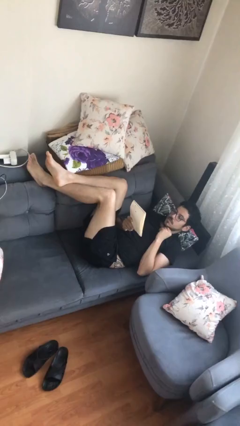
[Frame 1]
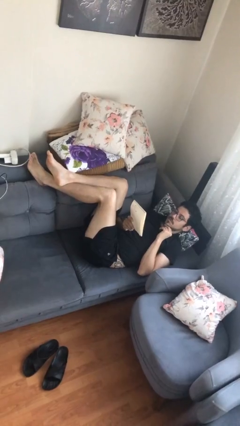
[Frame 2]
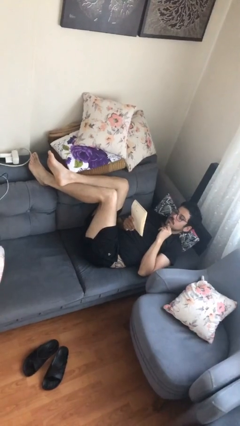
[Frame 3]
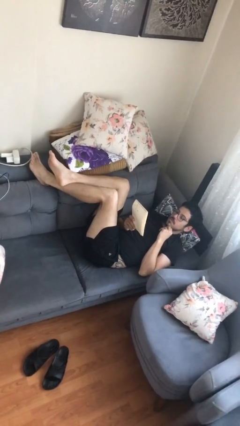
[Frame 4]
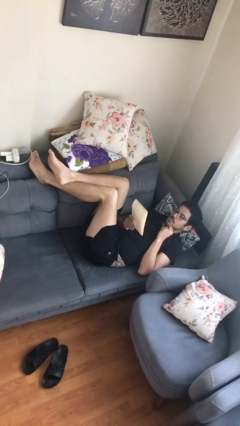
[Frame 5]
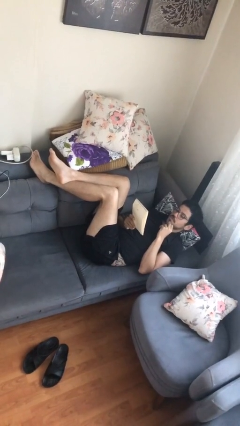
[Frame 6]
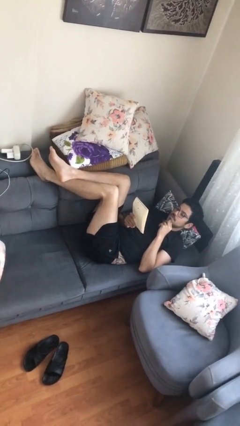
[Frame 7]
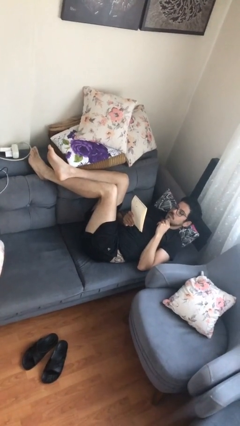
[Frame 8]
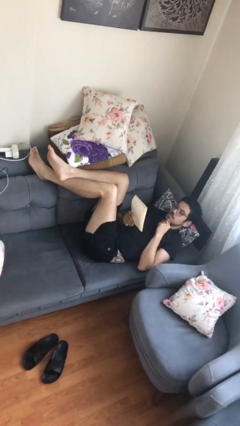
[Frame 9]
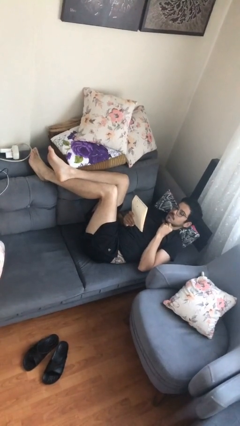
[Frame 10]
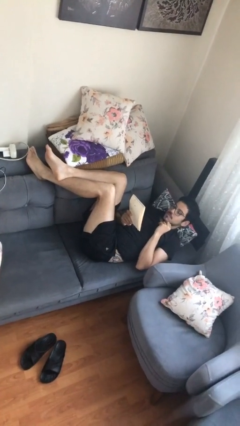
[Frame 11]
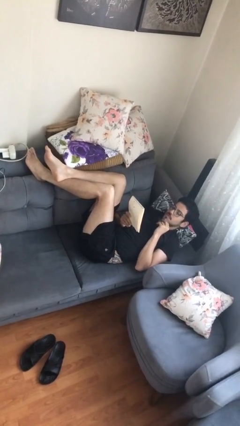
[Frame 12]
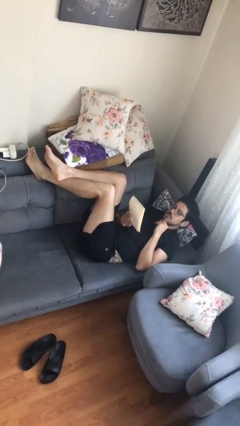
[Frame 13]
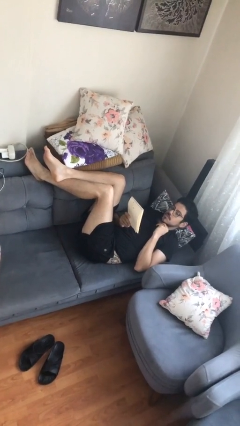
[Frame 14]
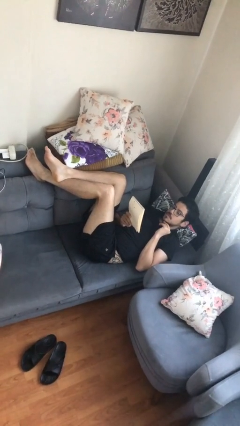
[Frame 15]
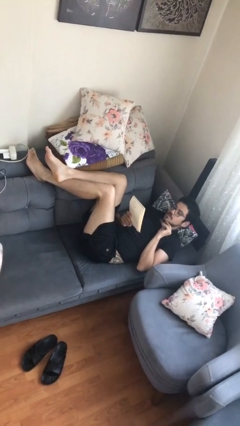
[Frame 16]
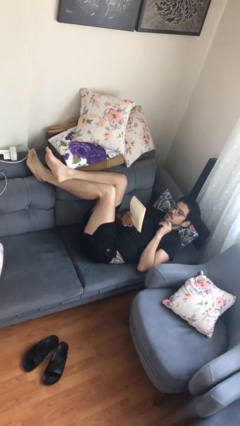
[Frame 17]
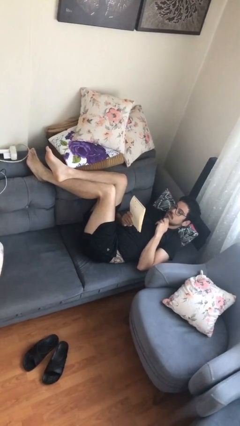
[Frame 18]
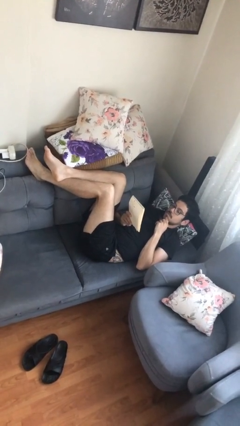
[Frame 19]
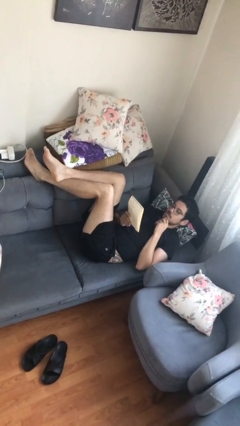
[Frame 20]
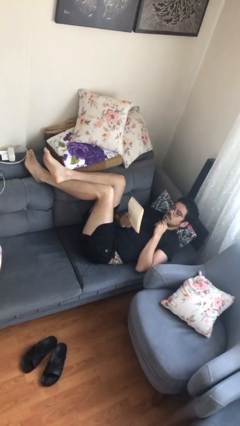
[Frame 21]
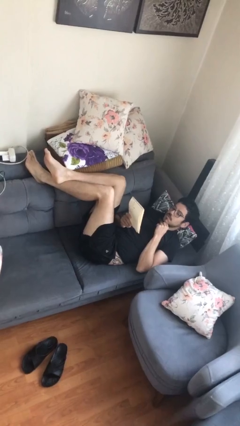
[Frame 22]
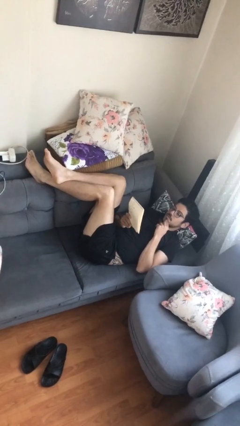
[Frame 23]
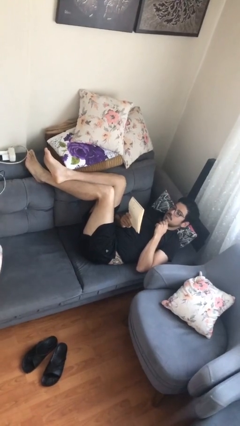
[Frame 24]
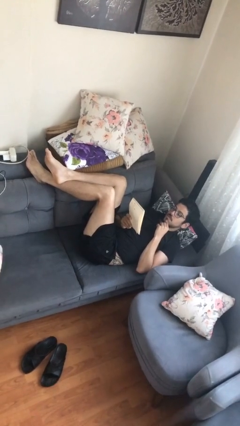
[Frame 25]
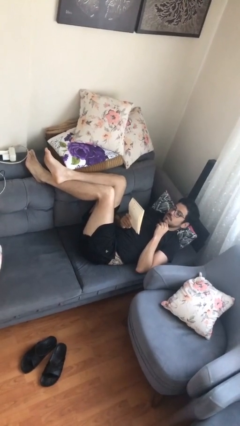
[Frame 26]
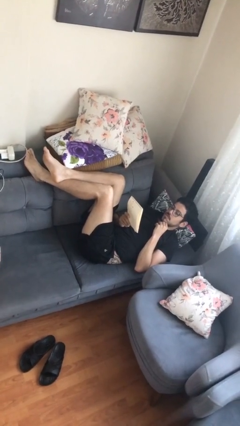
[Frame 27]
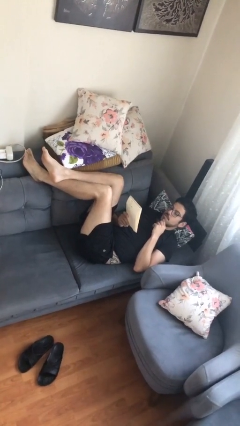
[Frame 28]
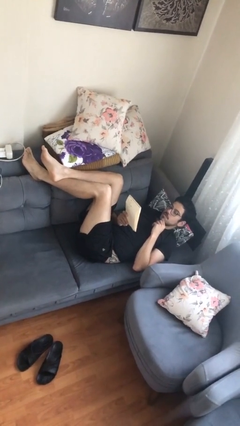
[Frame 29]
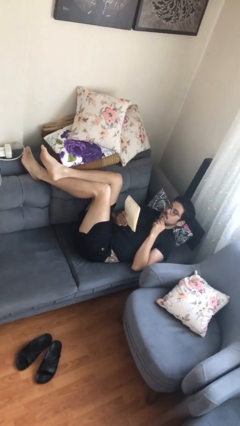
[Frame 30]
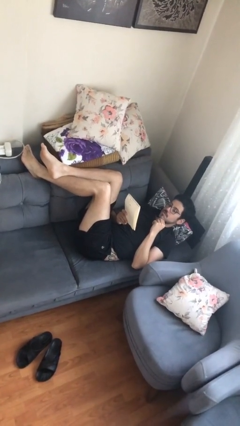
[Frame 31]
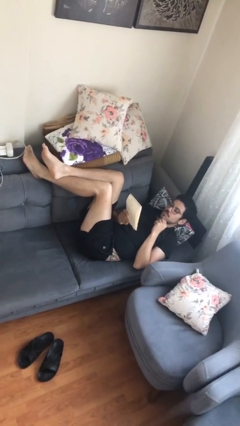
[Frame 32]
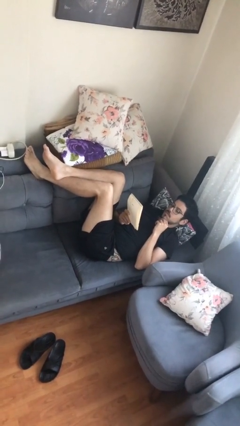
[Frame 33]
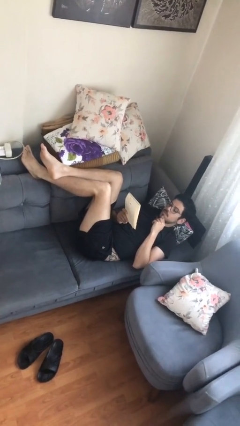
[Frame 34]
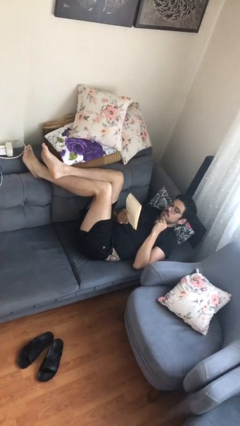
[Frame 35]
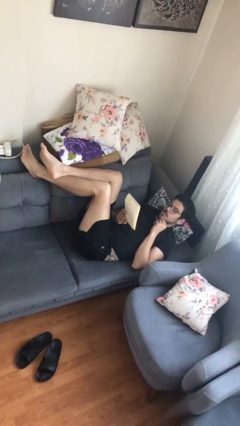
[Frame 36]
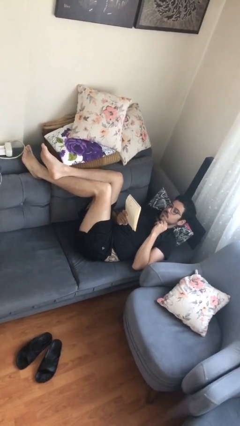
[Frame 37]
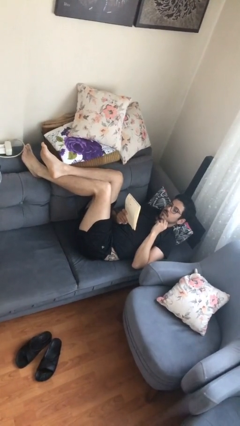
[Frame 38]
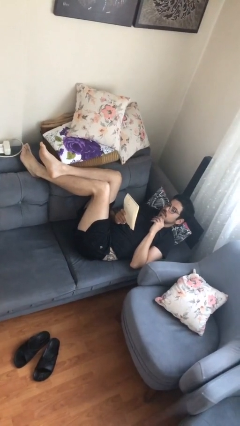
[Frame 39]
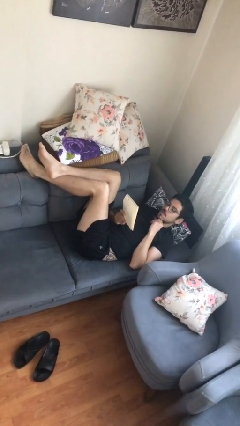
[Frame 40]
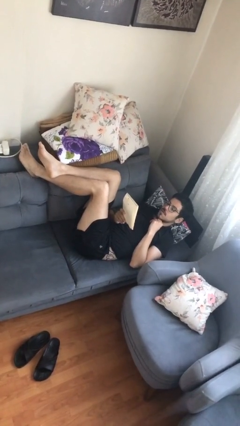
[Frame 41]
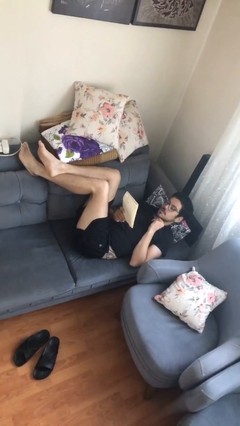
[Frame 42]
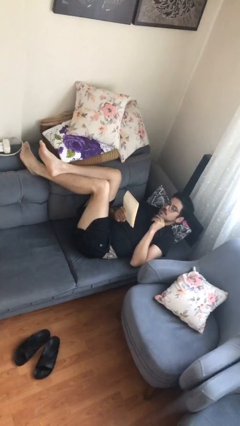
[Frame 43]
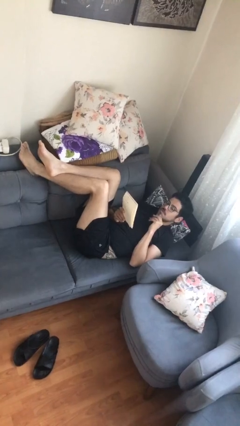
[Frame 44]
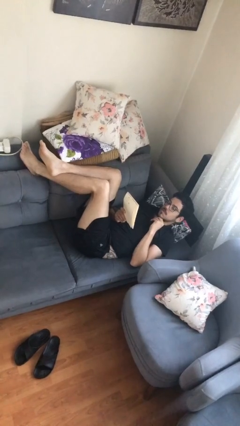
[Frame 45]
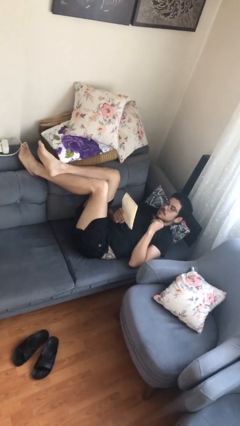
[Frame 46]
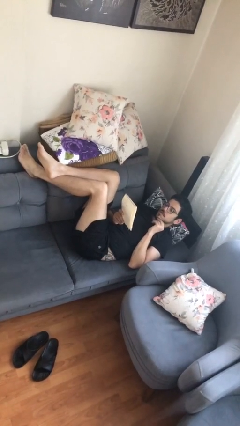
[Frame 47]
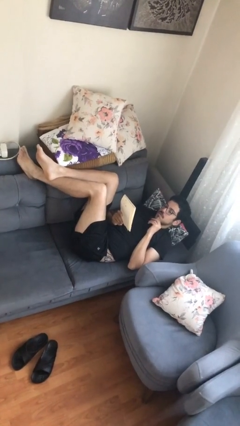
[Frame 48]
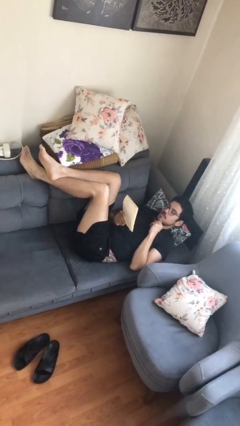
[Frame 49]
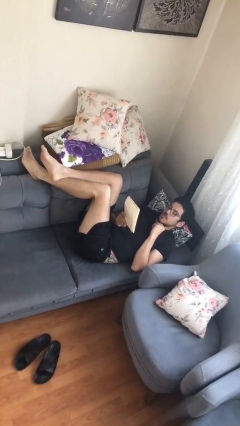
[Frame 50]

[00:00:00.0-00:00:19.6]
person reads document

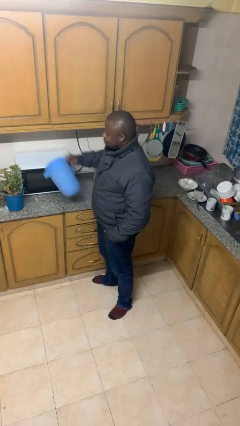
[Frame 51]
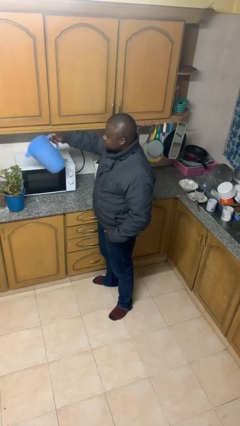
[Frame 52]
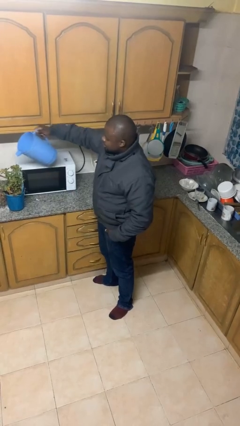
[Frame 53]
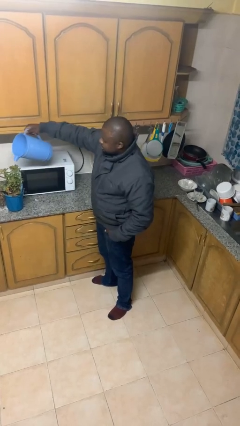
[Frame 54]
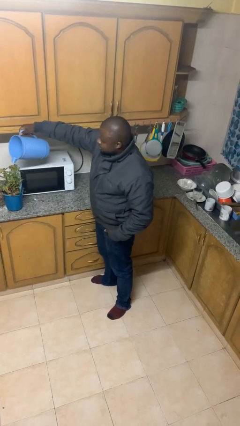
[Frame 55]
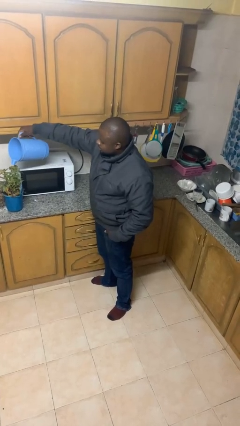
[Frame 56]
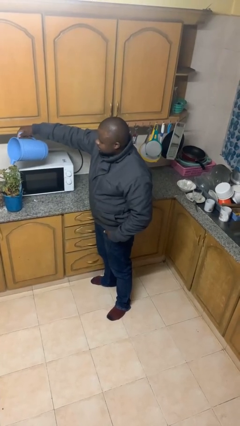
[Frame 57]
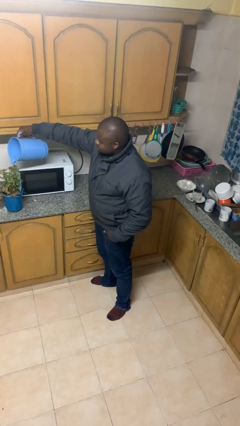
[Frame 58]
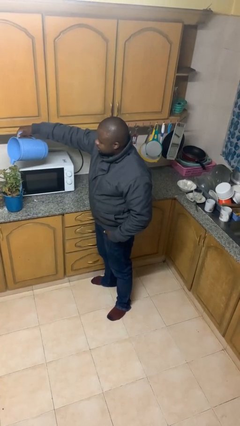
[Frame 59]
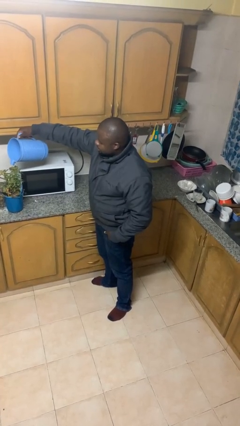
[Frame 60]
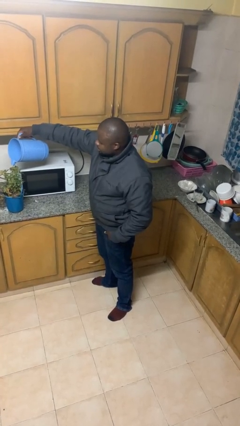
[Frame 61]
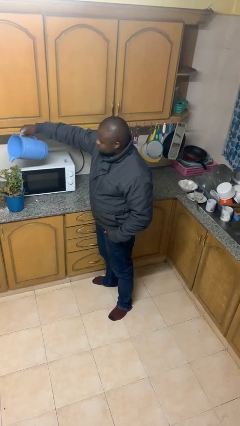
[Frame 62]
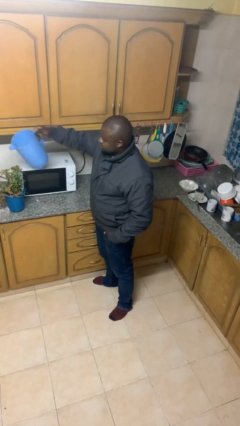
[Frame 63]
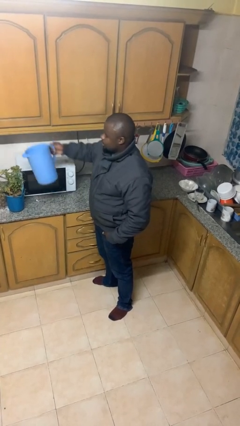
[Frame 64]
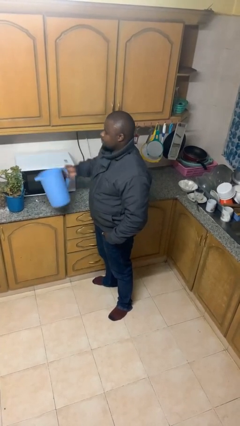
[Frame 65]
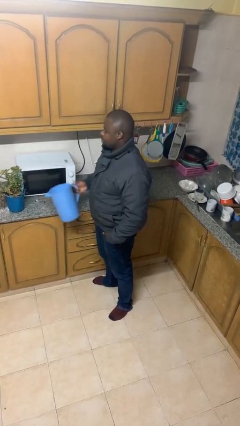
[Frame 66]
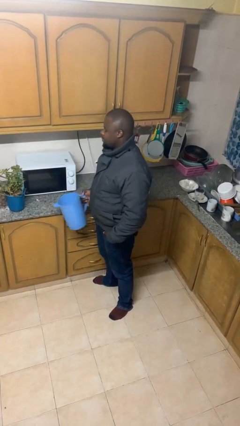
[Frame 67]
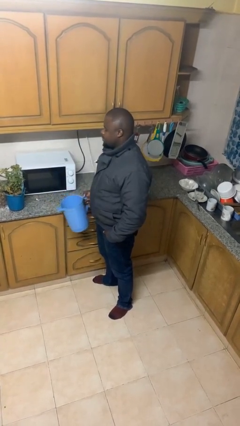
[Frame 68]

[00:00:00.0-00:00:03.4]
person waters houseplant

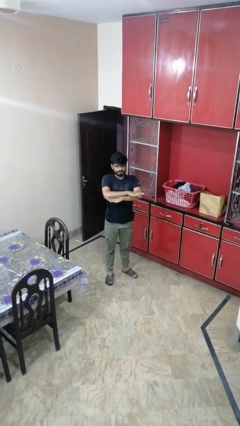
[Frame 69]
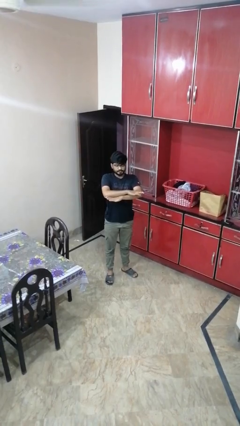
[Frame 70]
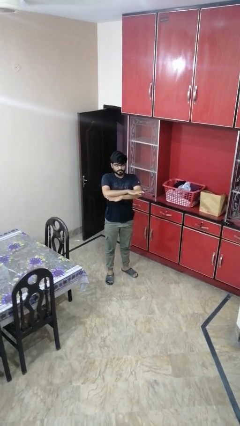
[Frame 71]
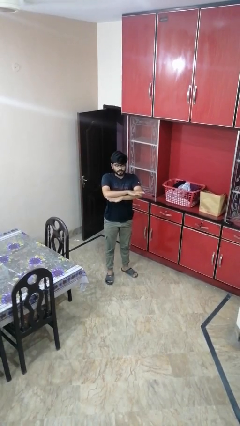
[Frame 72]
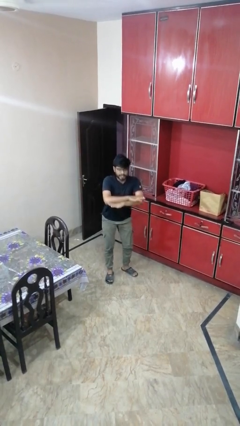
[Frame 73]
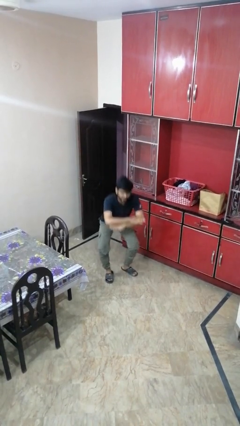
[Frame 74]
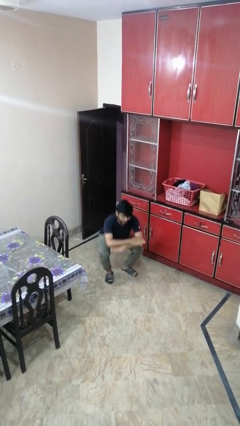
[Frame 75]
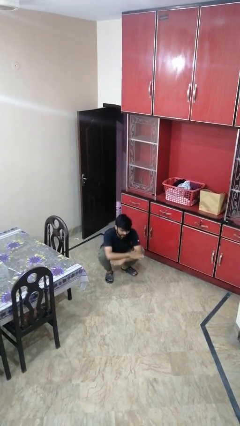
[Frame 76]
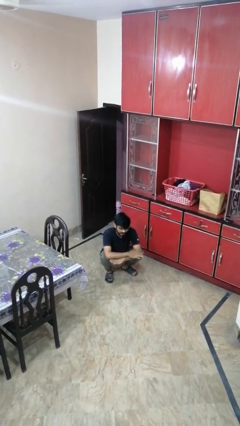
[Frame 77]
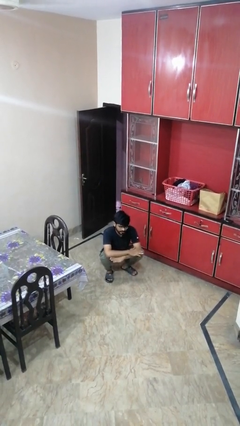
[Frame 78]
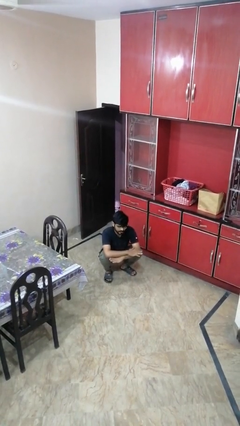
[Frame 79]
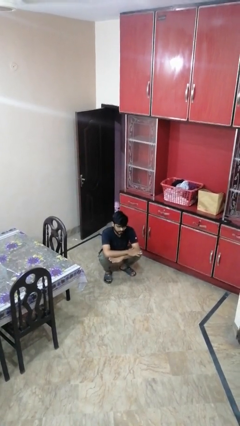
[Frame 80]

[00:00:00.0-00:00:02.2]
person squats

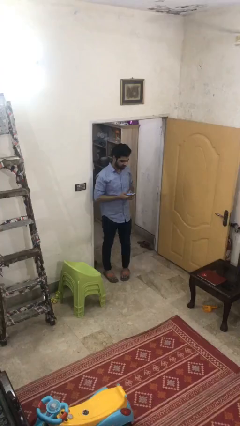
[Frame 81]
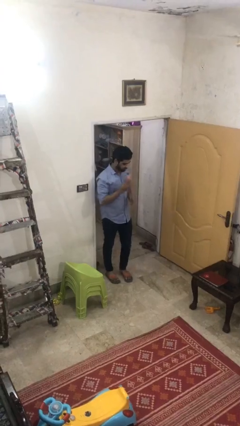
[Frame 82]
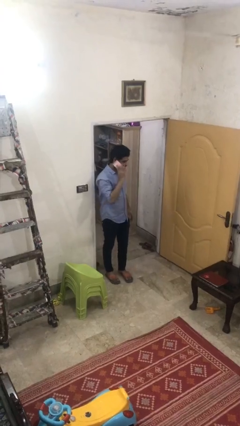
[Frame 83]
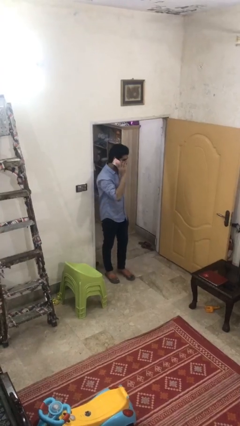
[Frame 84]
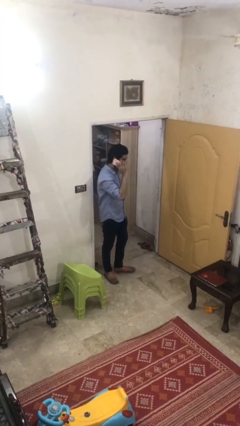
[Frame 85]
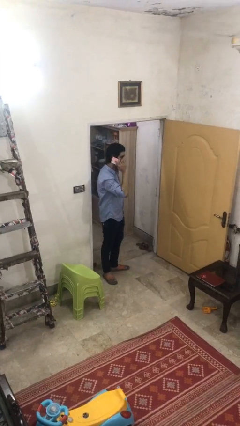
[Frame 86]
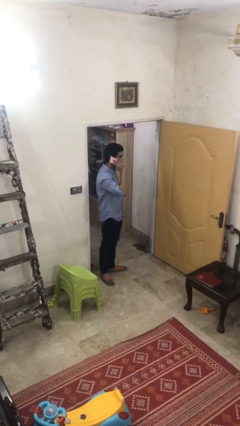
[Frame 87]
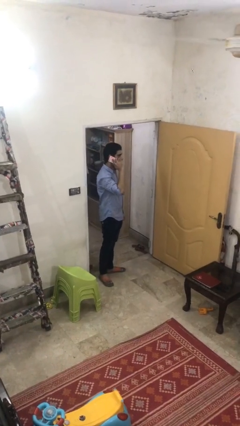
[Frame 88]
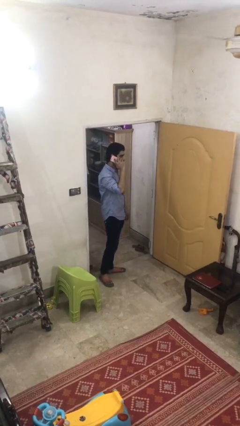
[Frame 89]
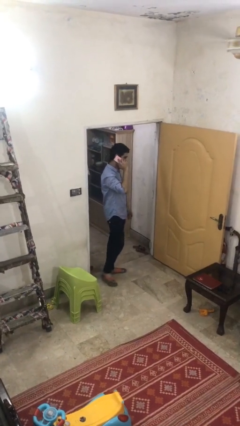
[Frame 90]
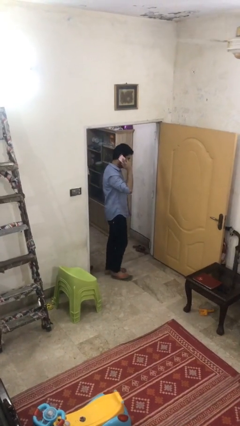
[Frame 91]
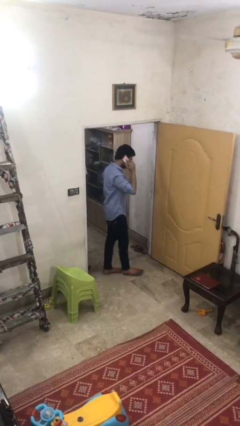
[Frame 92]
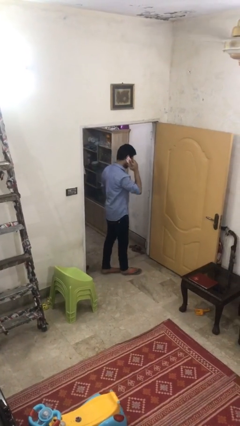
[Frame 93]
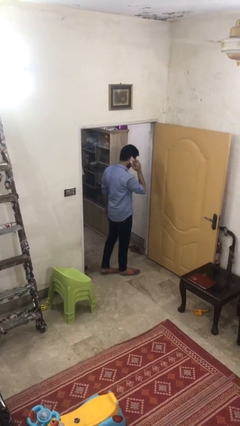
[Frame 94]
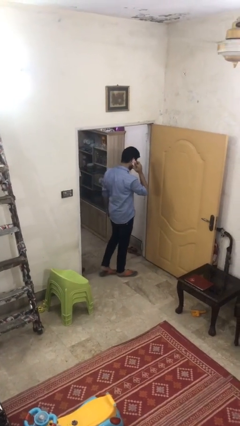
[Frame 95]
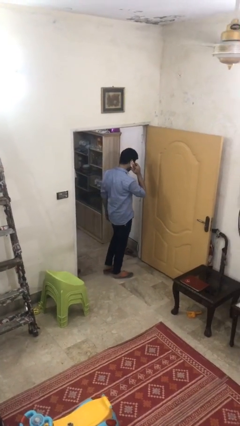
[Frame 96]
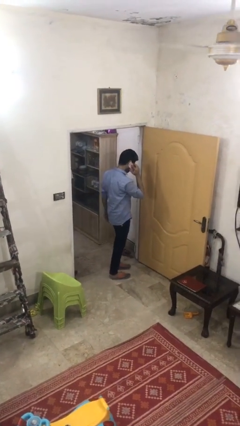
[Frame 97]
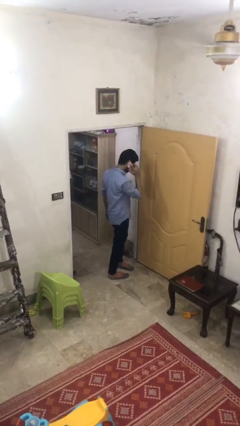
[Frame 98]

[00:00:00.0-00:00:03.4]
person talks on phone
